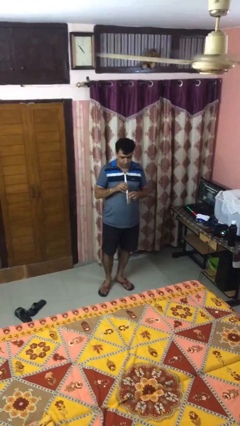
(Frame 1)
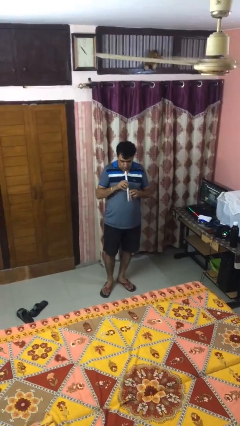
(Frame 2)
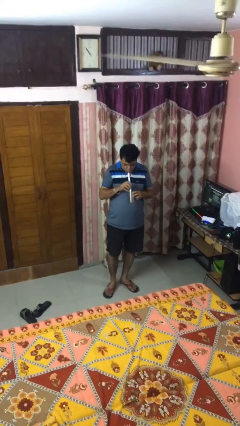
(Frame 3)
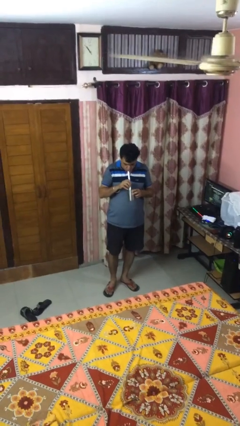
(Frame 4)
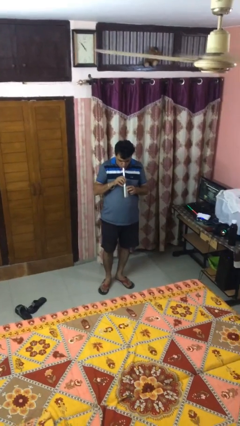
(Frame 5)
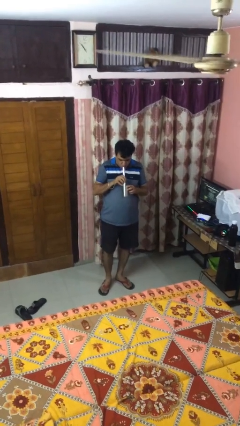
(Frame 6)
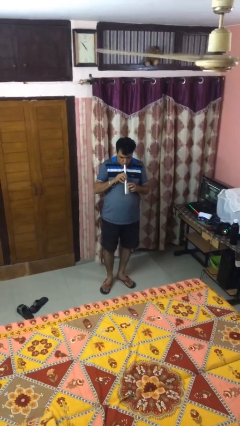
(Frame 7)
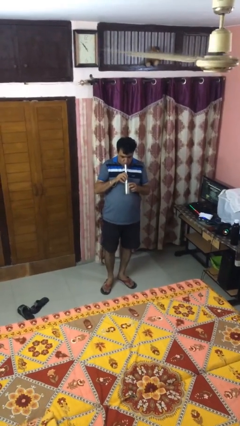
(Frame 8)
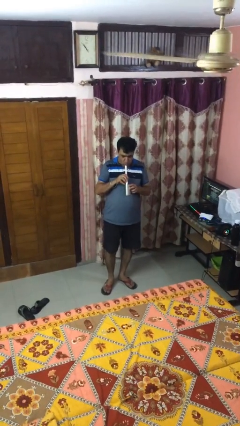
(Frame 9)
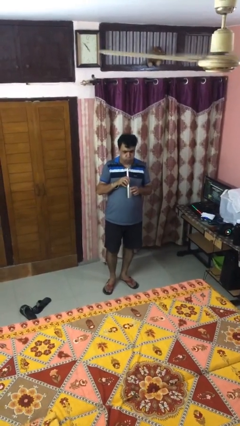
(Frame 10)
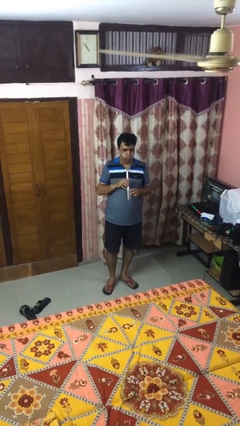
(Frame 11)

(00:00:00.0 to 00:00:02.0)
person drinks from straw

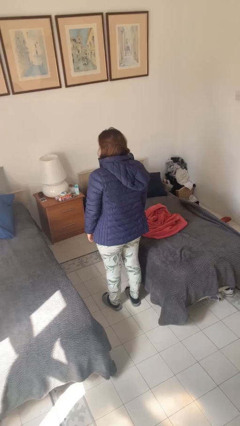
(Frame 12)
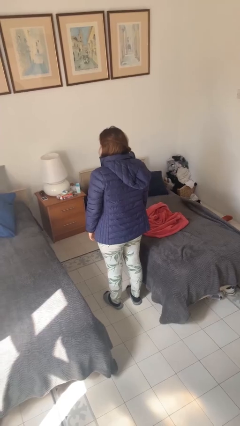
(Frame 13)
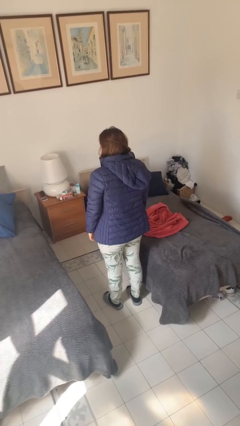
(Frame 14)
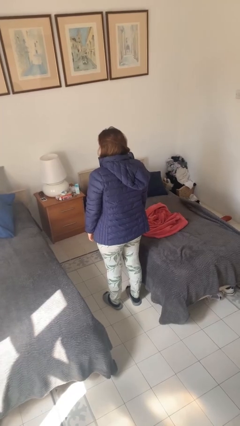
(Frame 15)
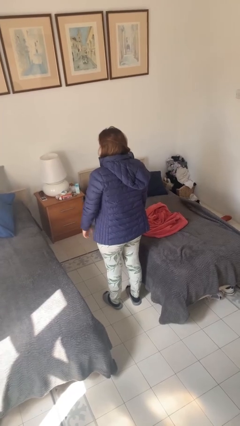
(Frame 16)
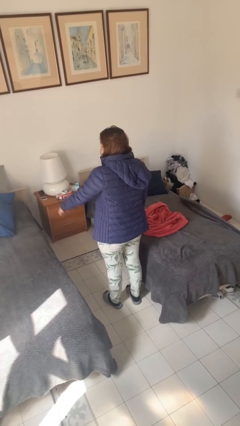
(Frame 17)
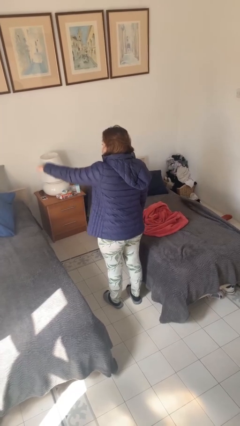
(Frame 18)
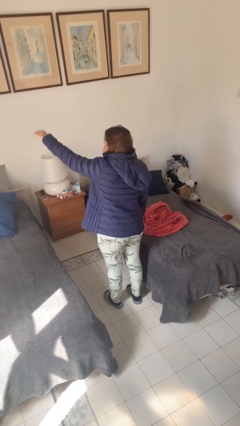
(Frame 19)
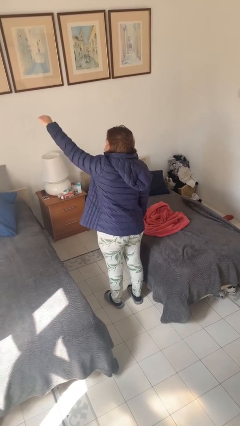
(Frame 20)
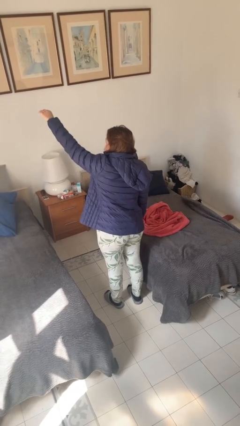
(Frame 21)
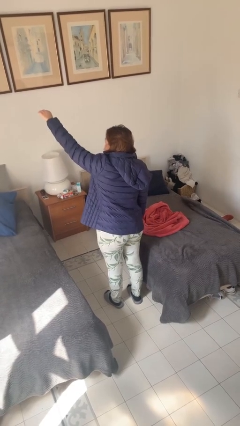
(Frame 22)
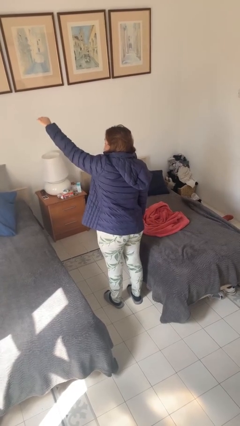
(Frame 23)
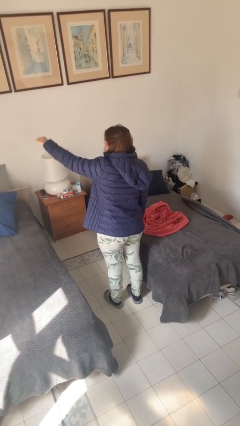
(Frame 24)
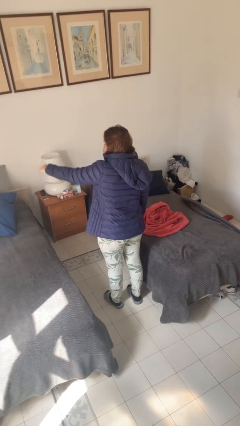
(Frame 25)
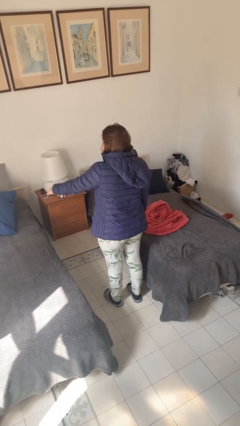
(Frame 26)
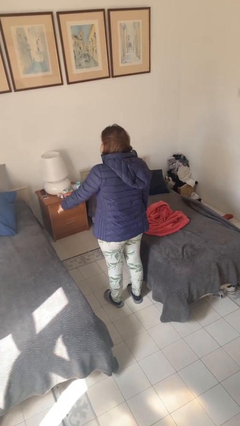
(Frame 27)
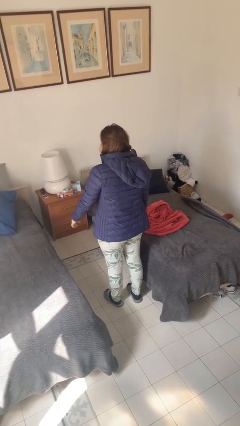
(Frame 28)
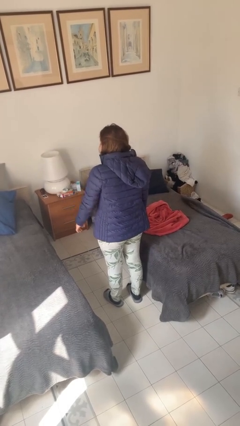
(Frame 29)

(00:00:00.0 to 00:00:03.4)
person gestures hang loose

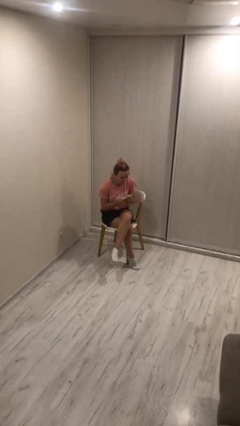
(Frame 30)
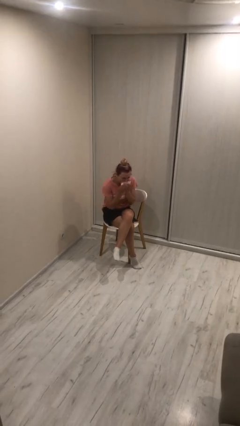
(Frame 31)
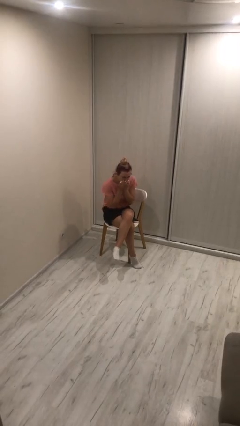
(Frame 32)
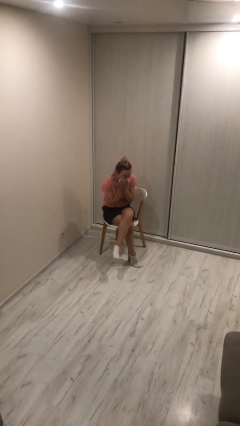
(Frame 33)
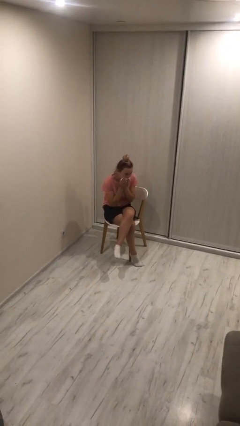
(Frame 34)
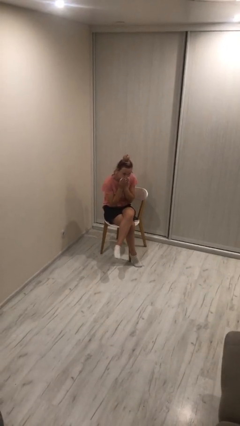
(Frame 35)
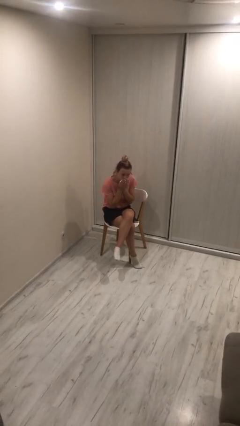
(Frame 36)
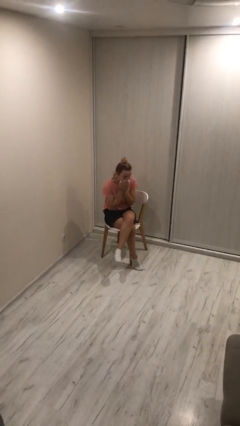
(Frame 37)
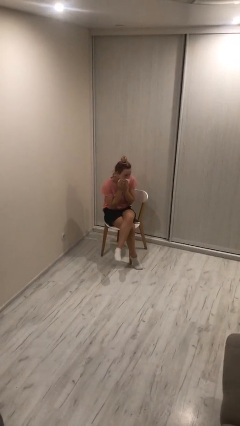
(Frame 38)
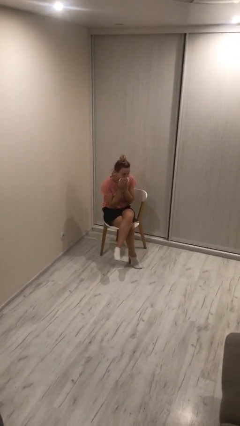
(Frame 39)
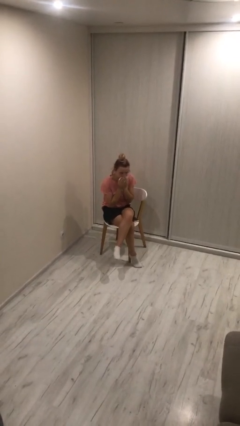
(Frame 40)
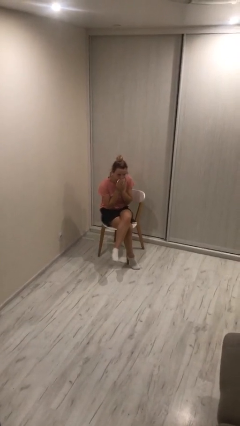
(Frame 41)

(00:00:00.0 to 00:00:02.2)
person wipes mouth with napkin

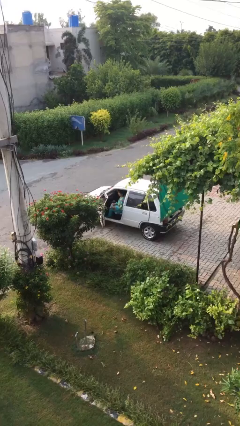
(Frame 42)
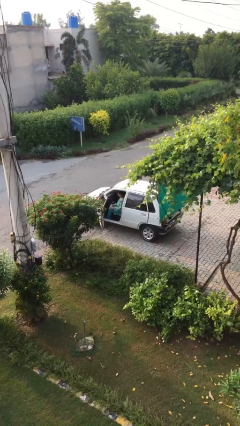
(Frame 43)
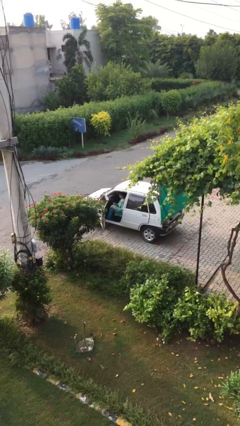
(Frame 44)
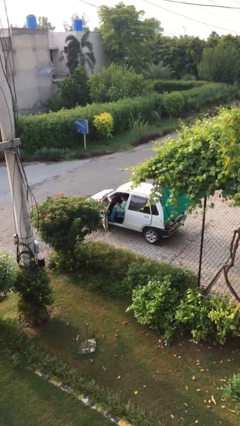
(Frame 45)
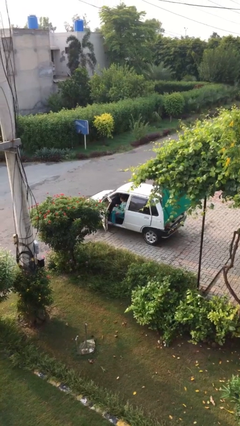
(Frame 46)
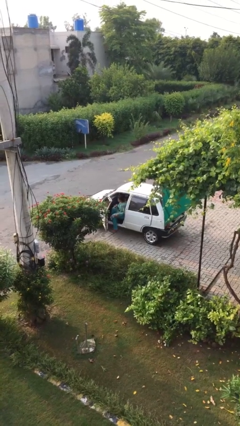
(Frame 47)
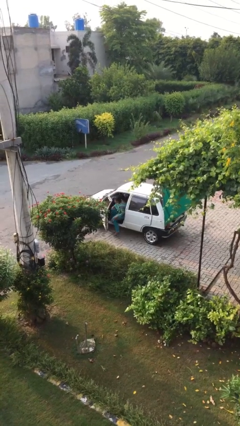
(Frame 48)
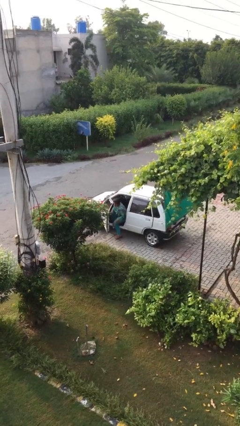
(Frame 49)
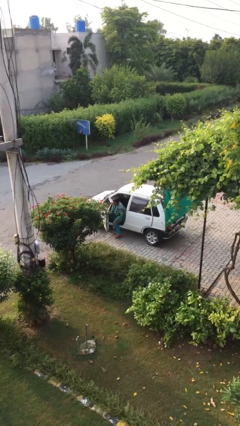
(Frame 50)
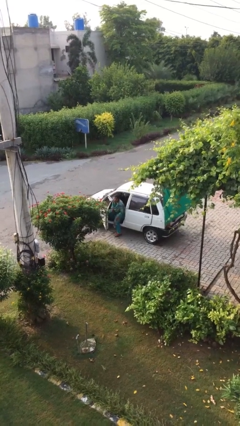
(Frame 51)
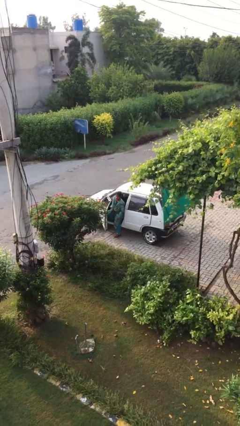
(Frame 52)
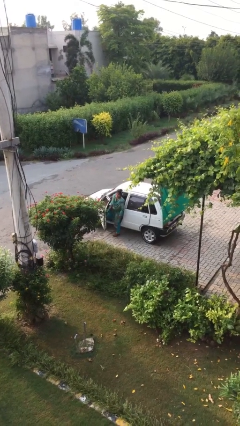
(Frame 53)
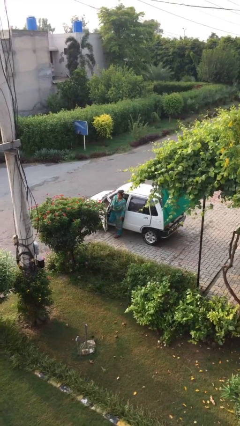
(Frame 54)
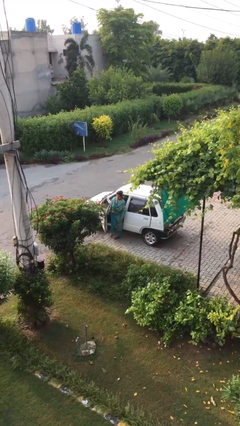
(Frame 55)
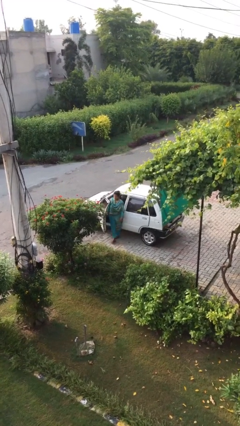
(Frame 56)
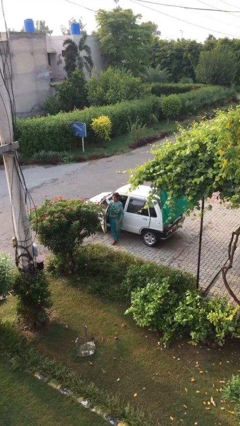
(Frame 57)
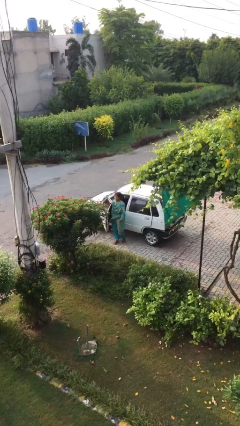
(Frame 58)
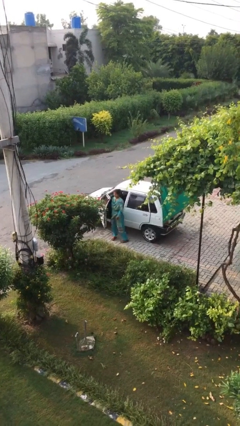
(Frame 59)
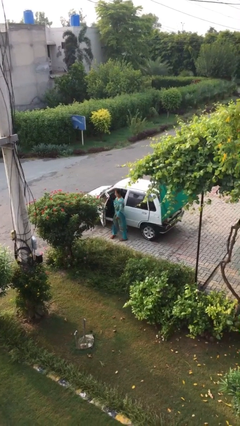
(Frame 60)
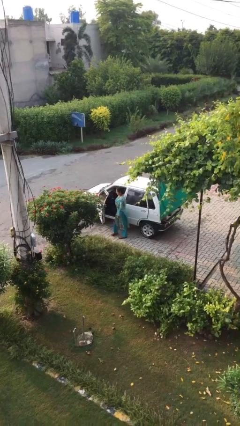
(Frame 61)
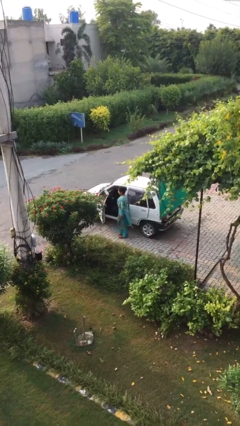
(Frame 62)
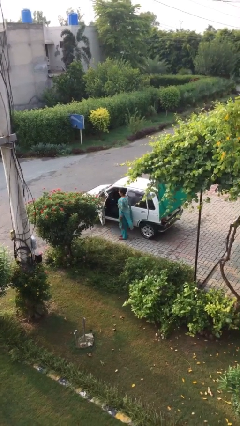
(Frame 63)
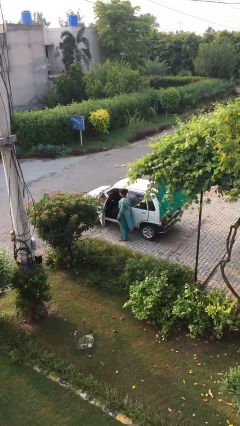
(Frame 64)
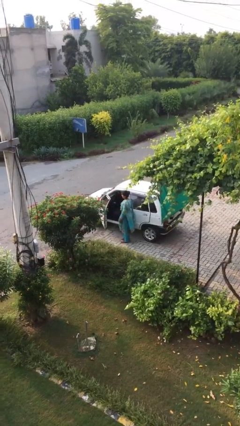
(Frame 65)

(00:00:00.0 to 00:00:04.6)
person exits car

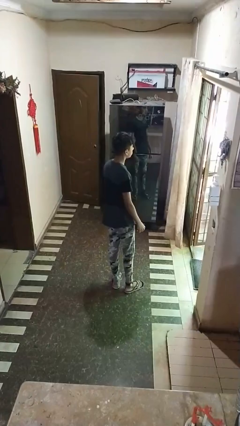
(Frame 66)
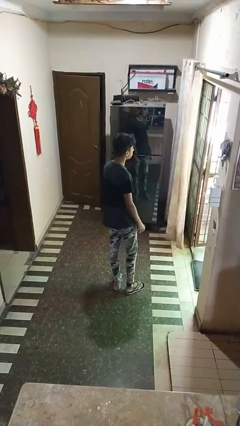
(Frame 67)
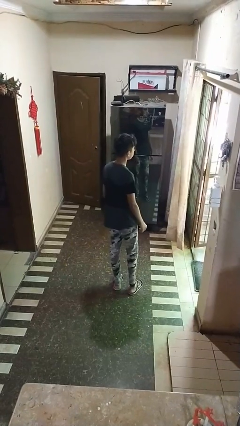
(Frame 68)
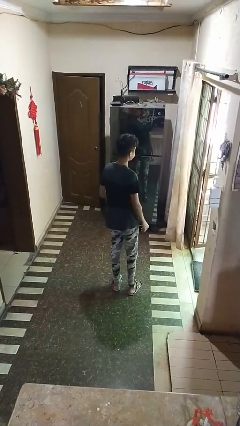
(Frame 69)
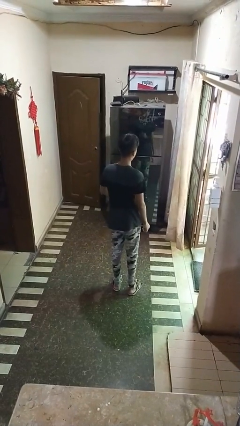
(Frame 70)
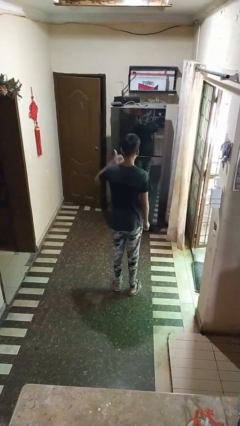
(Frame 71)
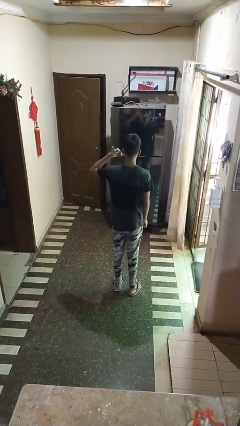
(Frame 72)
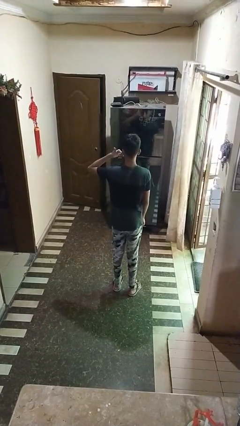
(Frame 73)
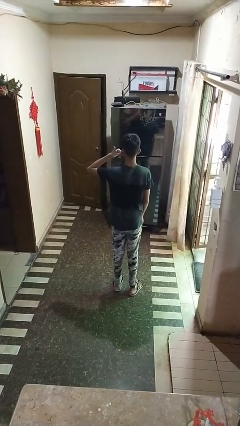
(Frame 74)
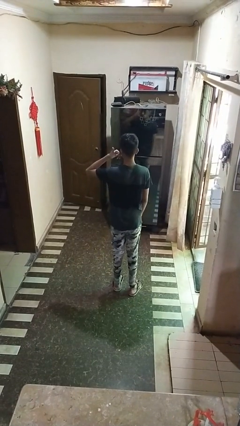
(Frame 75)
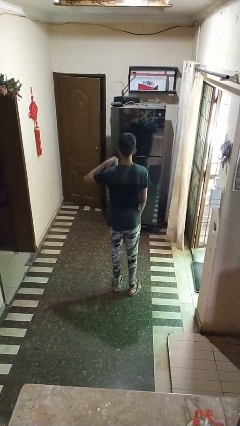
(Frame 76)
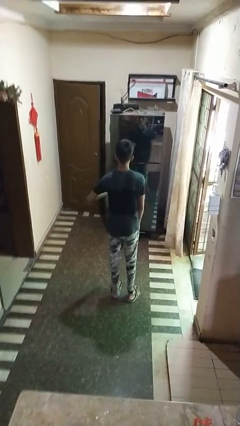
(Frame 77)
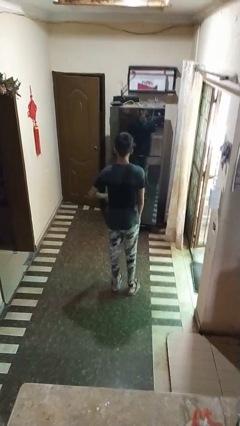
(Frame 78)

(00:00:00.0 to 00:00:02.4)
person gestures call me

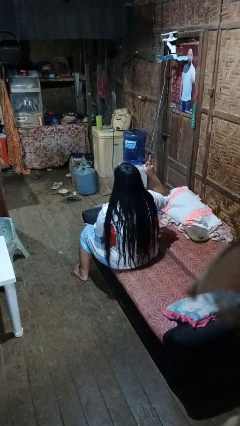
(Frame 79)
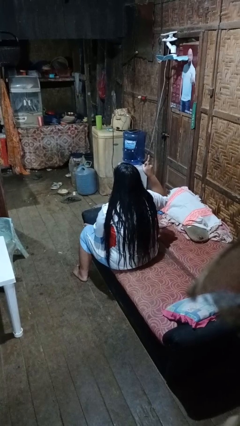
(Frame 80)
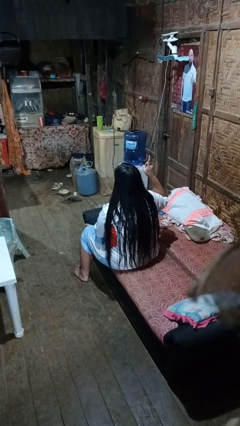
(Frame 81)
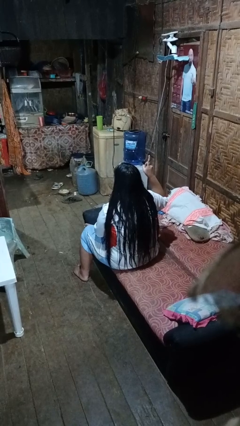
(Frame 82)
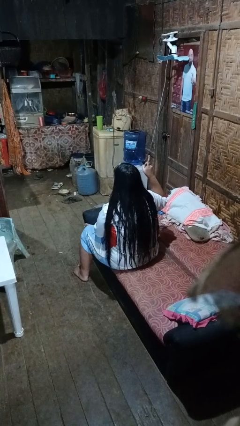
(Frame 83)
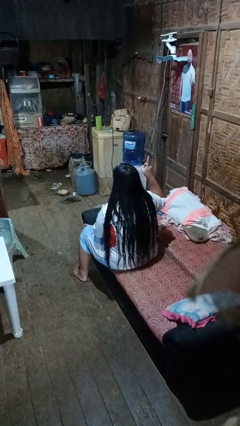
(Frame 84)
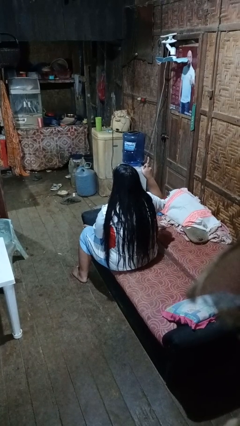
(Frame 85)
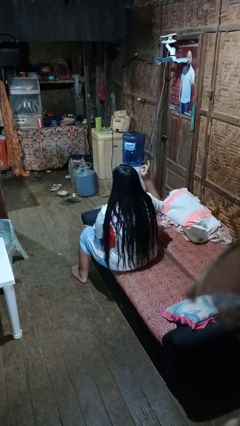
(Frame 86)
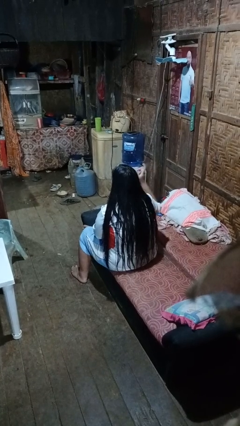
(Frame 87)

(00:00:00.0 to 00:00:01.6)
person gestures number one

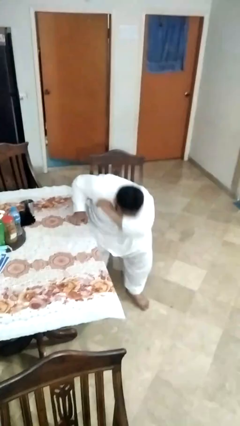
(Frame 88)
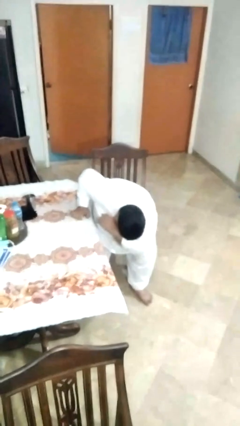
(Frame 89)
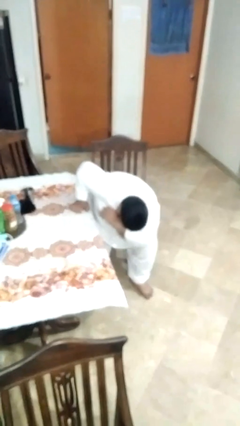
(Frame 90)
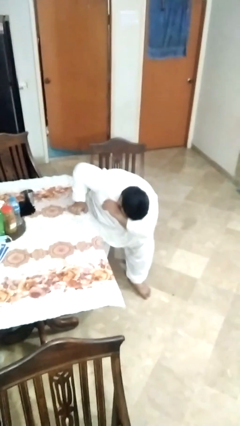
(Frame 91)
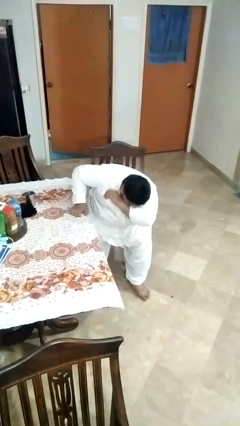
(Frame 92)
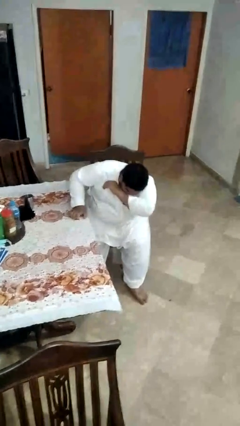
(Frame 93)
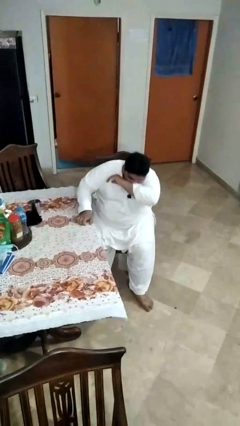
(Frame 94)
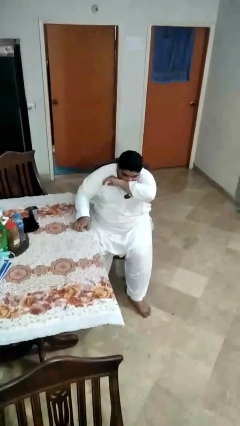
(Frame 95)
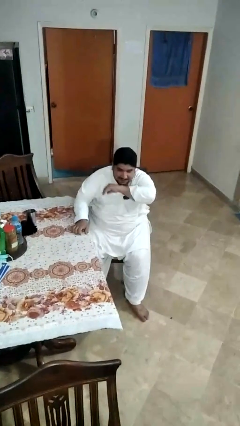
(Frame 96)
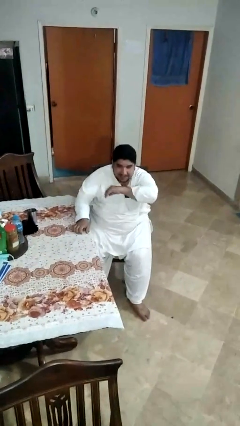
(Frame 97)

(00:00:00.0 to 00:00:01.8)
person sneezes into arm
